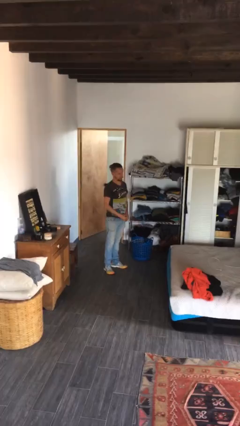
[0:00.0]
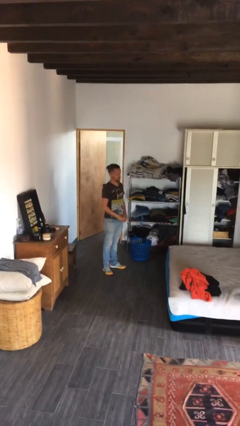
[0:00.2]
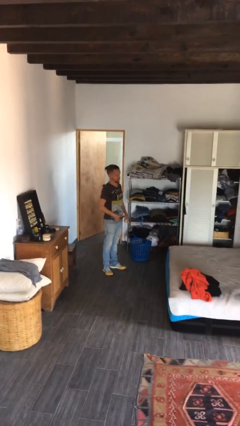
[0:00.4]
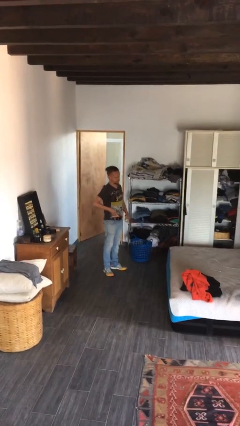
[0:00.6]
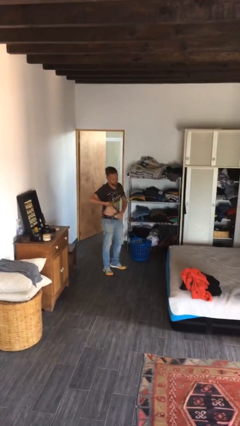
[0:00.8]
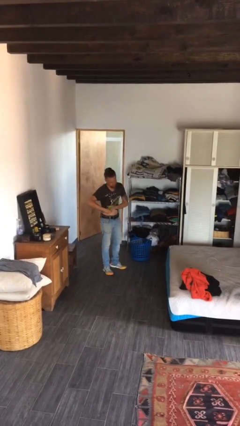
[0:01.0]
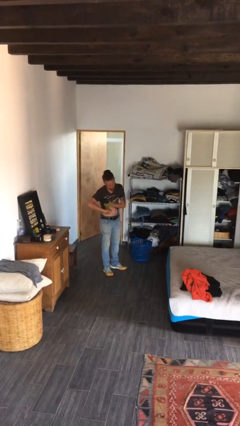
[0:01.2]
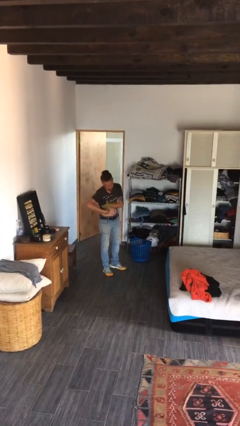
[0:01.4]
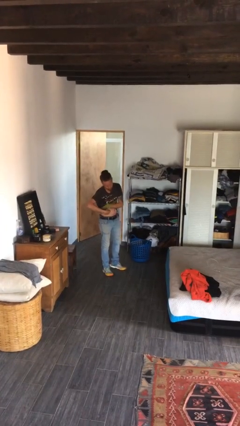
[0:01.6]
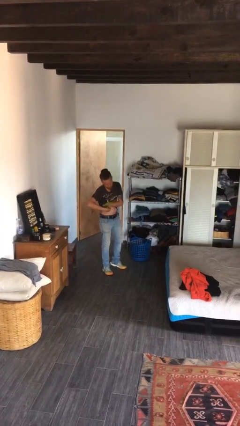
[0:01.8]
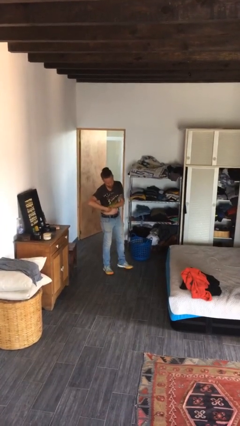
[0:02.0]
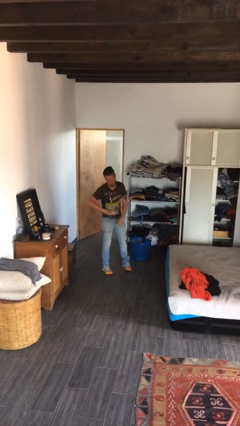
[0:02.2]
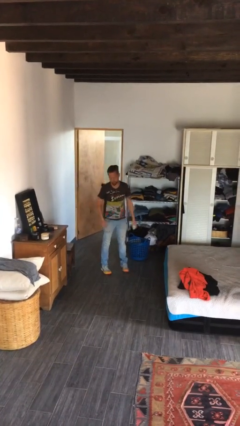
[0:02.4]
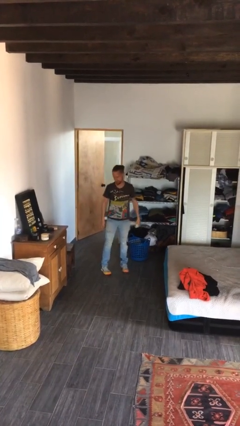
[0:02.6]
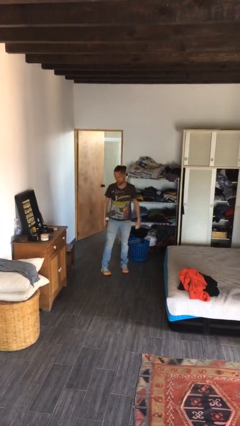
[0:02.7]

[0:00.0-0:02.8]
person applies deodorant

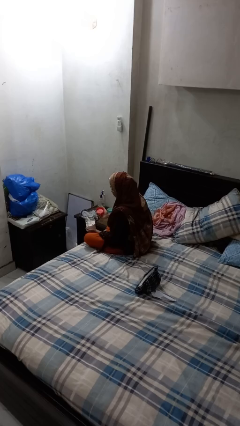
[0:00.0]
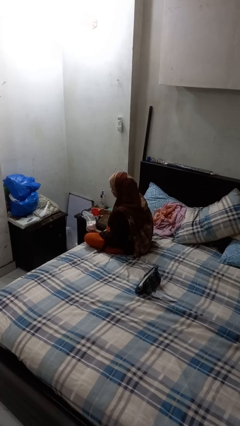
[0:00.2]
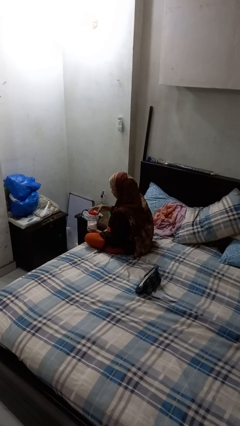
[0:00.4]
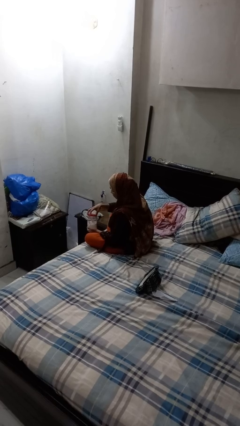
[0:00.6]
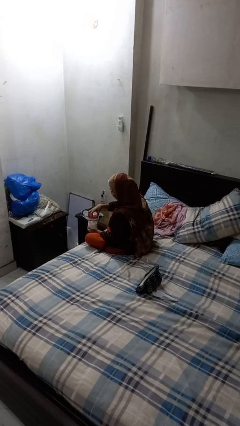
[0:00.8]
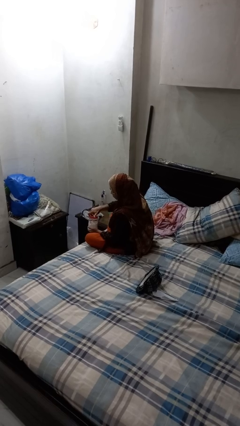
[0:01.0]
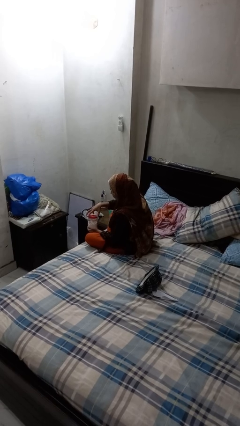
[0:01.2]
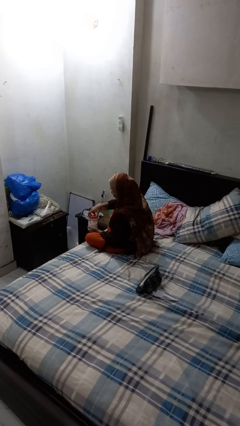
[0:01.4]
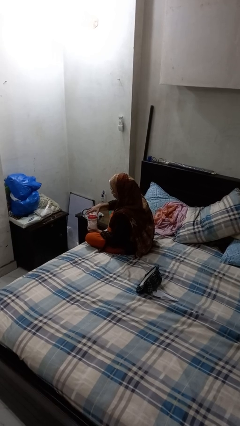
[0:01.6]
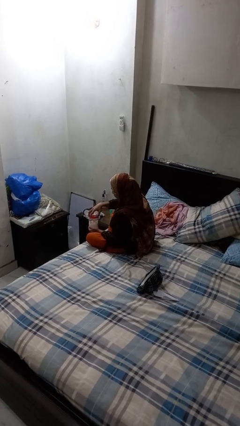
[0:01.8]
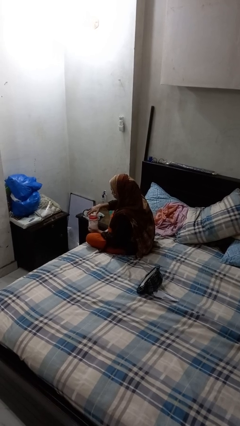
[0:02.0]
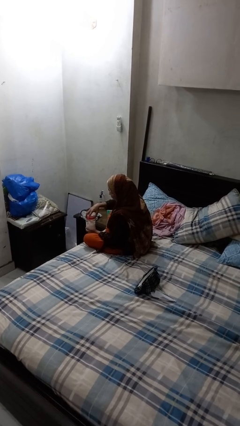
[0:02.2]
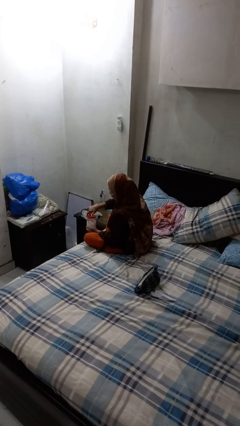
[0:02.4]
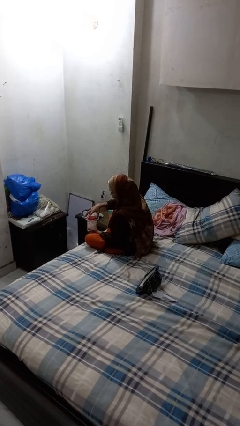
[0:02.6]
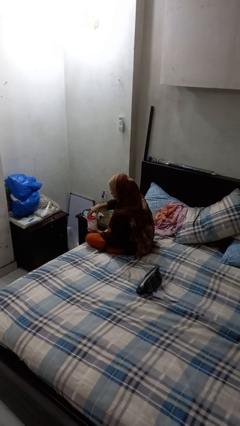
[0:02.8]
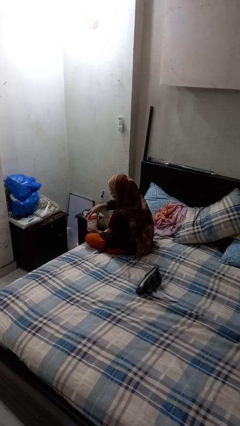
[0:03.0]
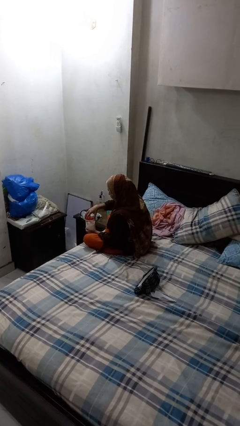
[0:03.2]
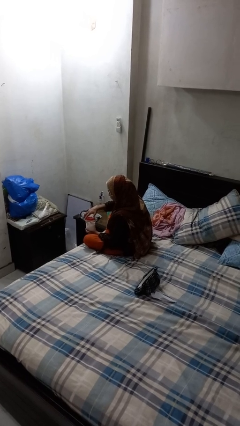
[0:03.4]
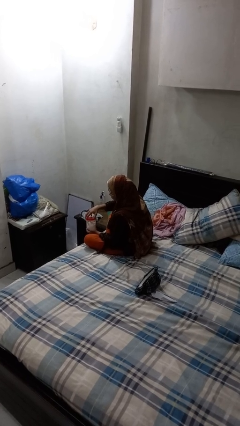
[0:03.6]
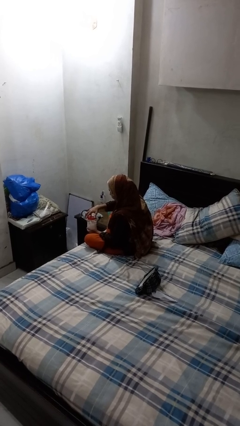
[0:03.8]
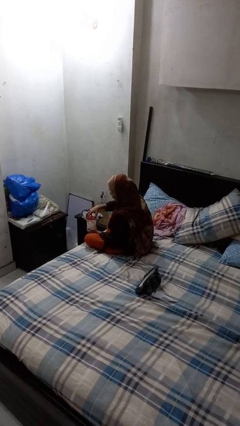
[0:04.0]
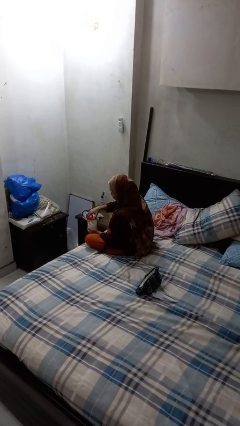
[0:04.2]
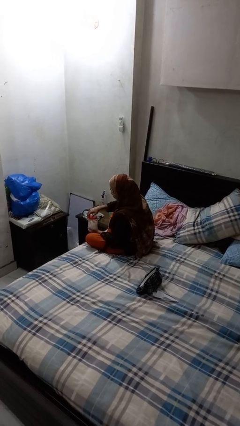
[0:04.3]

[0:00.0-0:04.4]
person closes jar

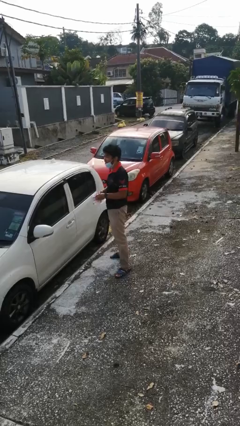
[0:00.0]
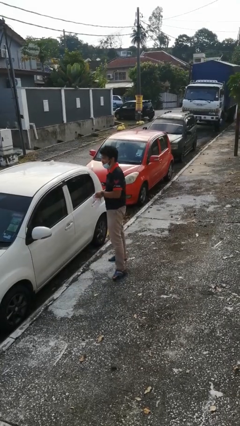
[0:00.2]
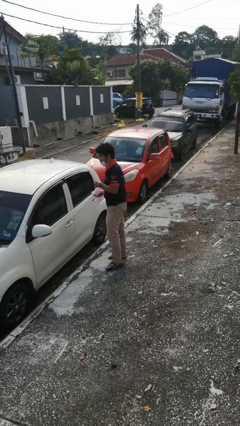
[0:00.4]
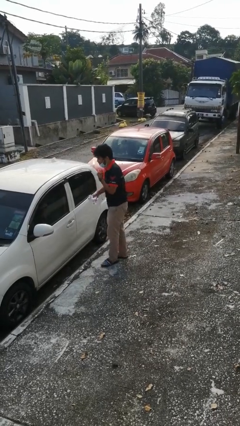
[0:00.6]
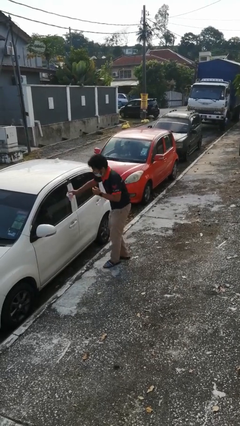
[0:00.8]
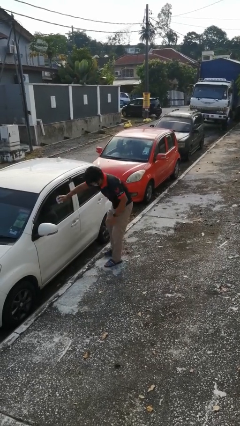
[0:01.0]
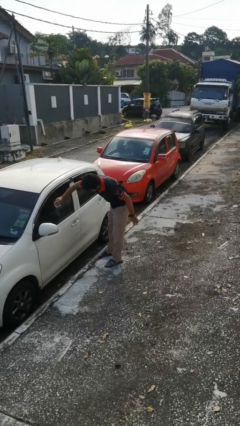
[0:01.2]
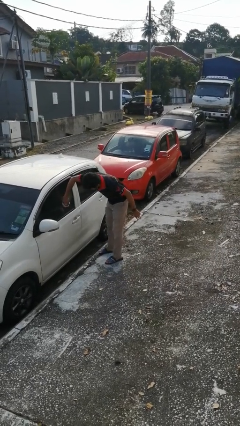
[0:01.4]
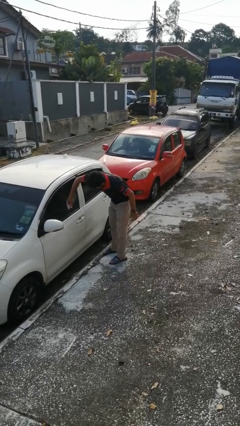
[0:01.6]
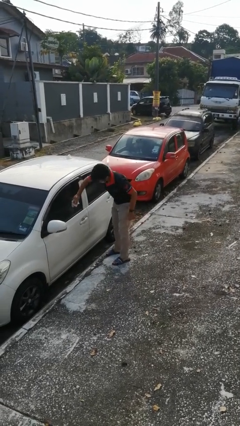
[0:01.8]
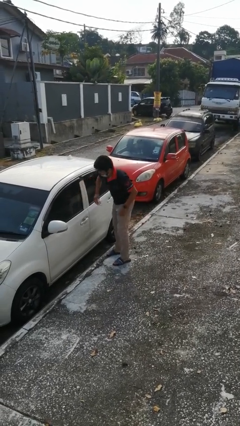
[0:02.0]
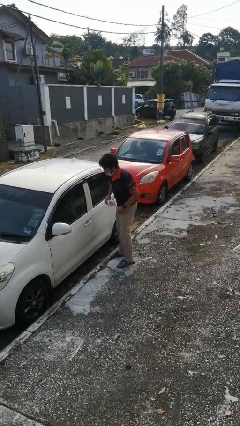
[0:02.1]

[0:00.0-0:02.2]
person polishes car with rag

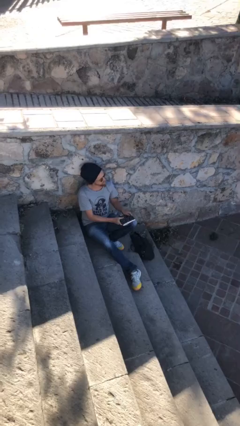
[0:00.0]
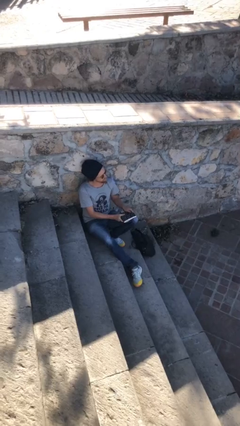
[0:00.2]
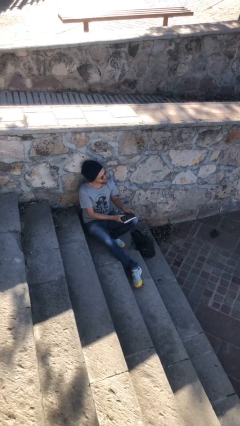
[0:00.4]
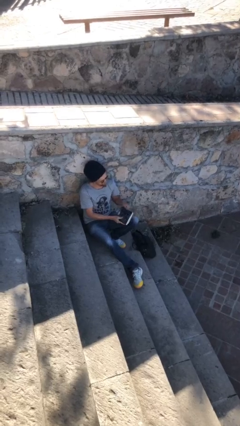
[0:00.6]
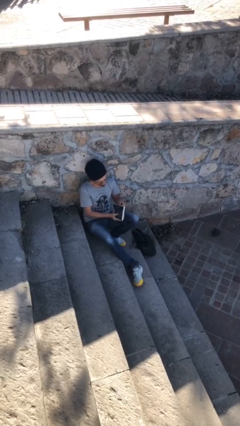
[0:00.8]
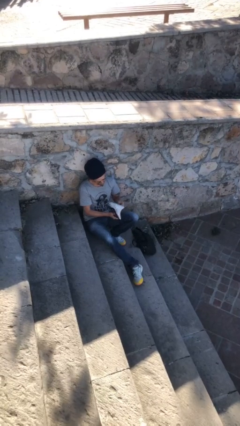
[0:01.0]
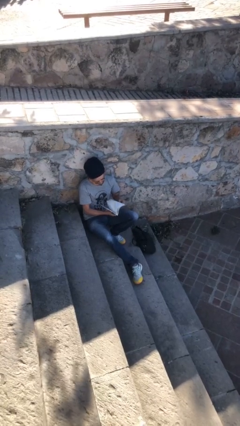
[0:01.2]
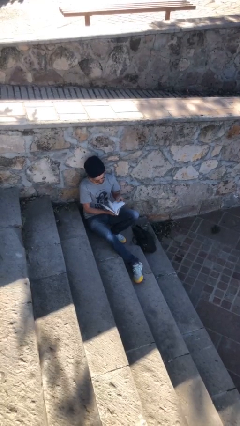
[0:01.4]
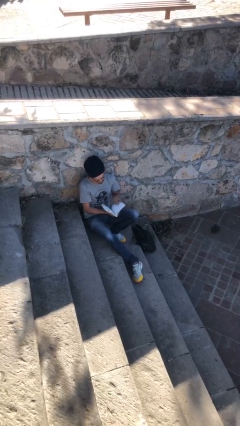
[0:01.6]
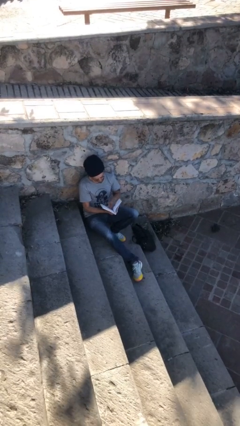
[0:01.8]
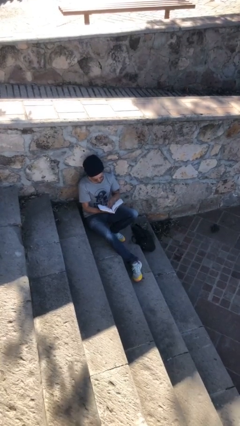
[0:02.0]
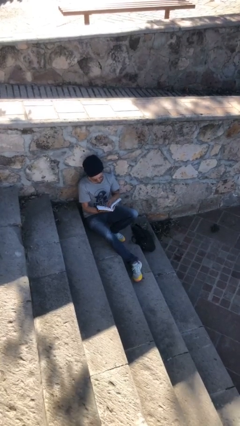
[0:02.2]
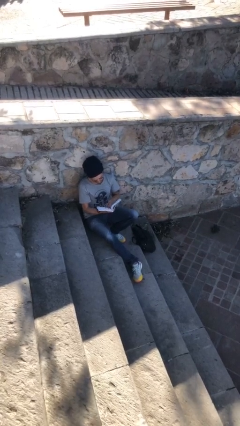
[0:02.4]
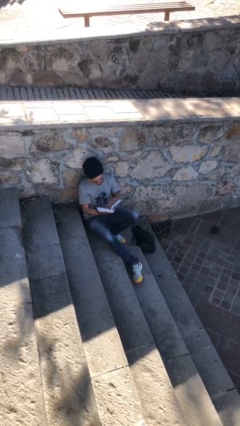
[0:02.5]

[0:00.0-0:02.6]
person reads document

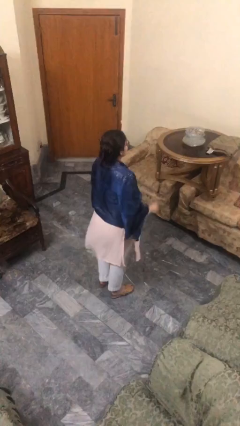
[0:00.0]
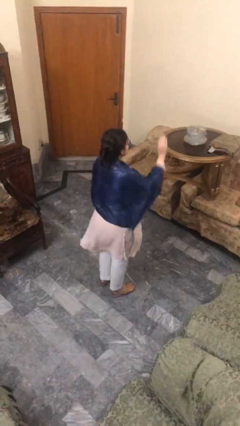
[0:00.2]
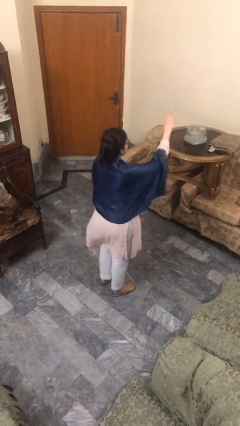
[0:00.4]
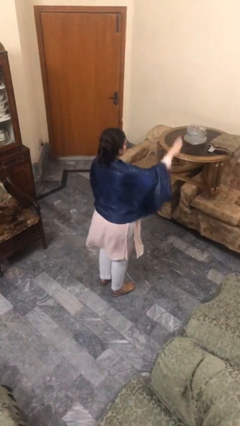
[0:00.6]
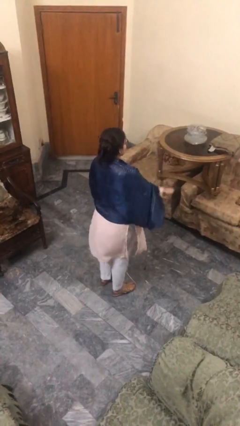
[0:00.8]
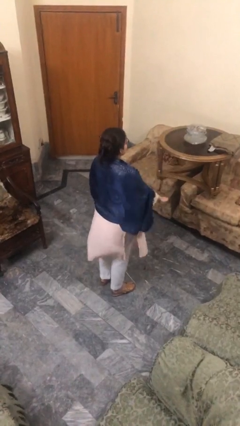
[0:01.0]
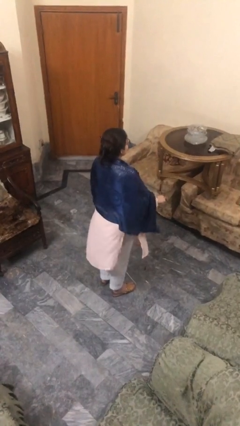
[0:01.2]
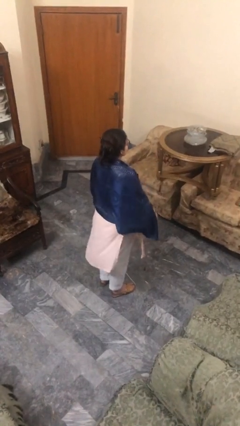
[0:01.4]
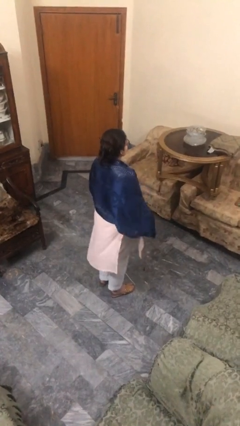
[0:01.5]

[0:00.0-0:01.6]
person gestures swipe down

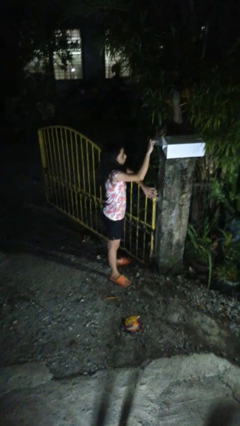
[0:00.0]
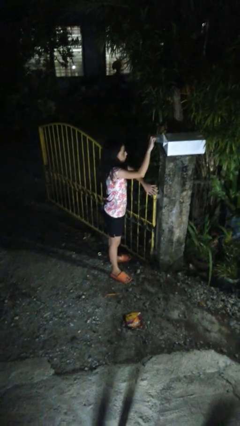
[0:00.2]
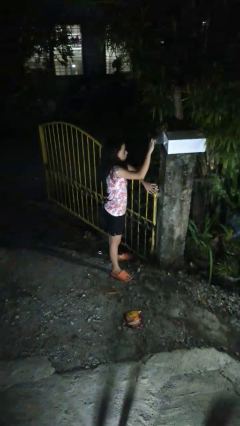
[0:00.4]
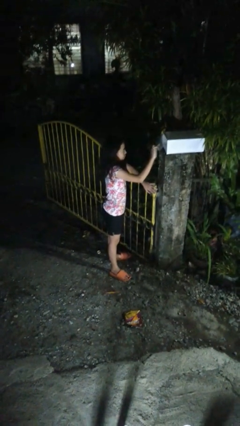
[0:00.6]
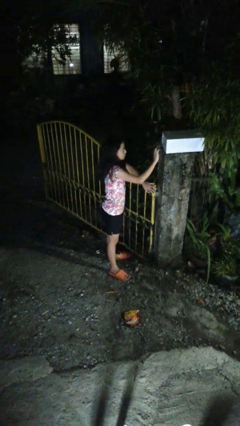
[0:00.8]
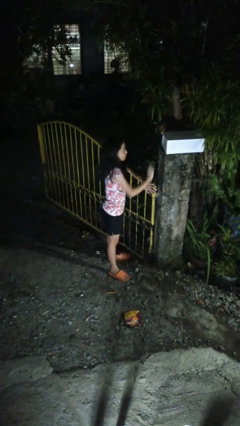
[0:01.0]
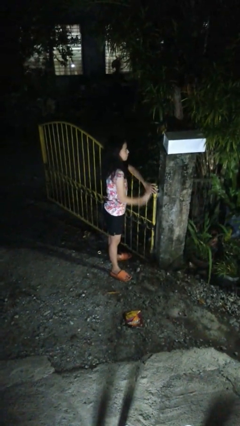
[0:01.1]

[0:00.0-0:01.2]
person closes mailbox

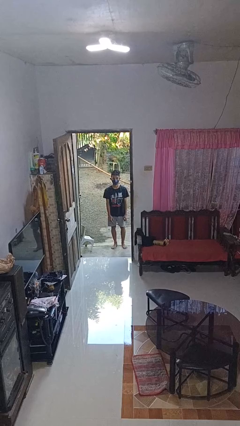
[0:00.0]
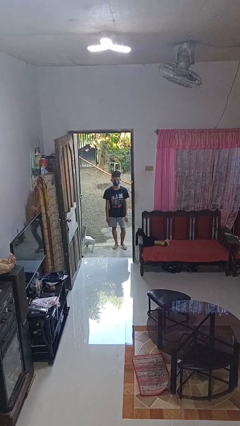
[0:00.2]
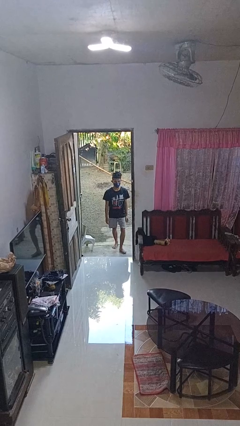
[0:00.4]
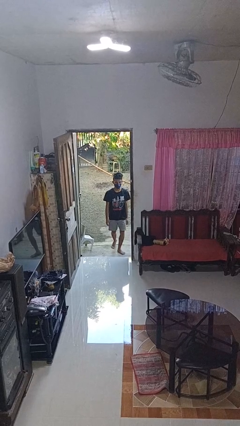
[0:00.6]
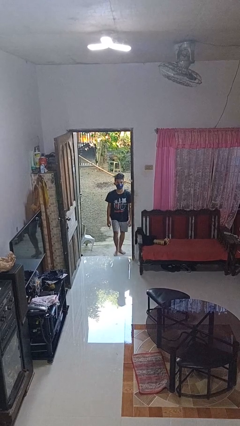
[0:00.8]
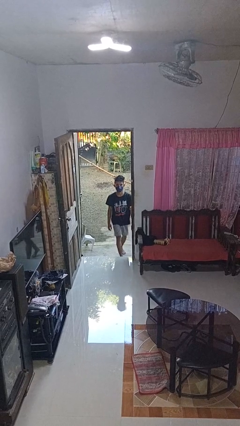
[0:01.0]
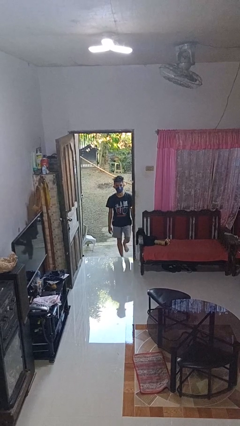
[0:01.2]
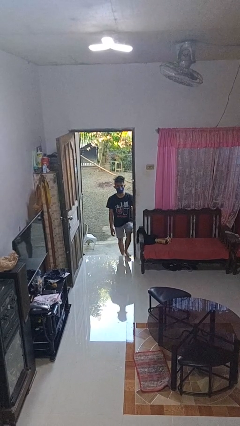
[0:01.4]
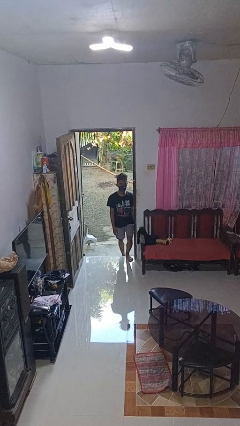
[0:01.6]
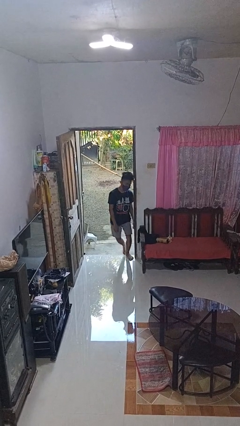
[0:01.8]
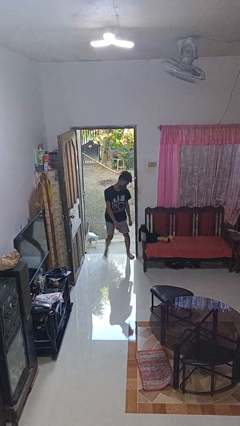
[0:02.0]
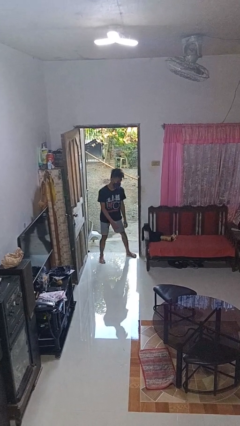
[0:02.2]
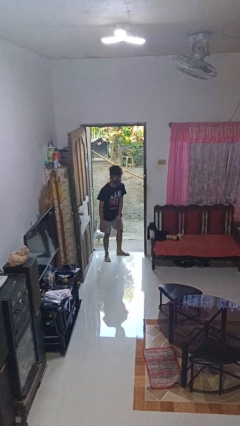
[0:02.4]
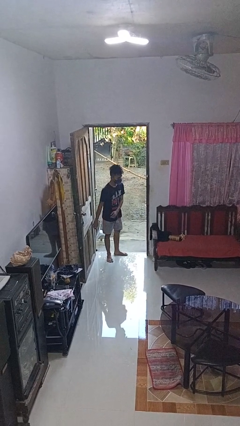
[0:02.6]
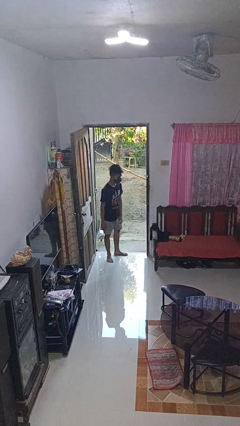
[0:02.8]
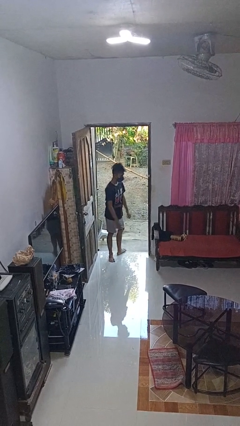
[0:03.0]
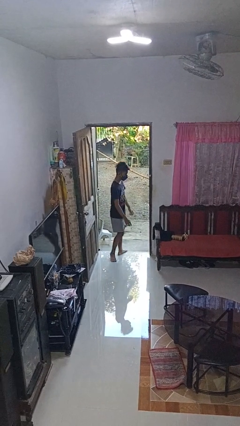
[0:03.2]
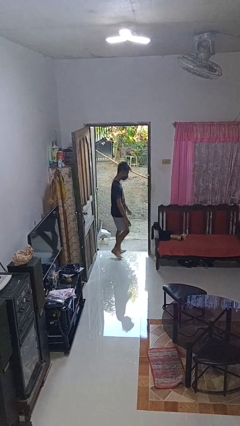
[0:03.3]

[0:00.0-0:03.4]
person bumps into wall
